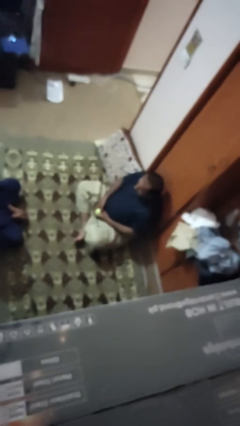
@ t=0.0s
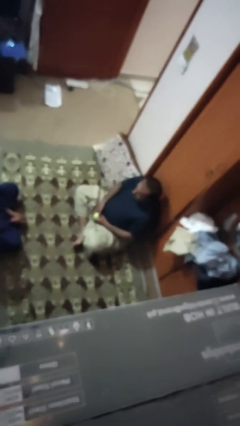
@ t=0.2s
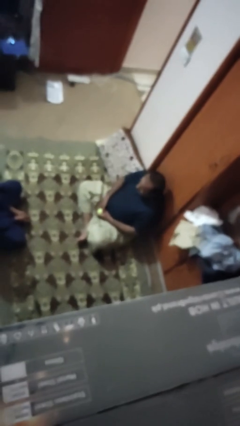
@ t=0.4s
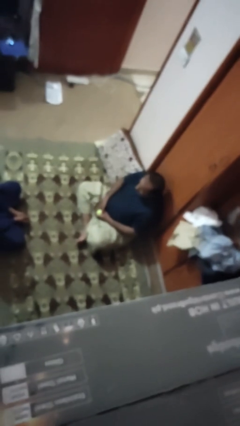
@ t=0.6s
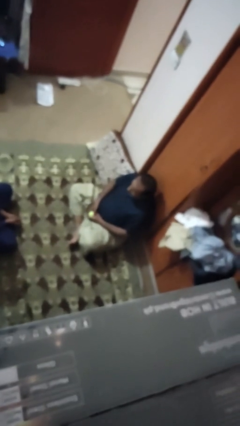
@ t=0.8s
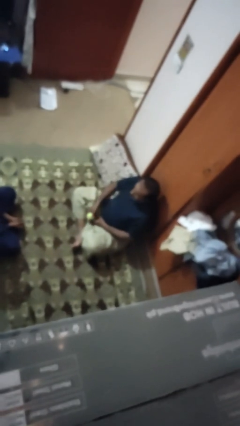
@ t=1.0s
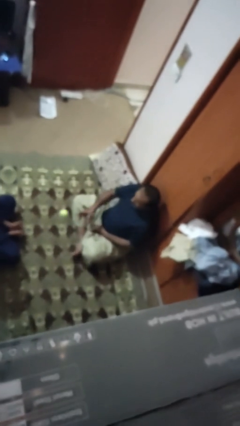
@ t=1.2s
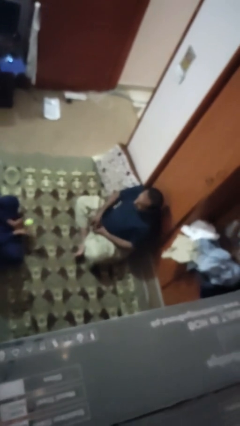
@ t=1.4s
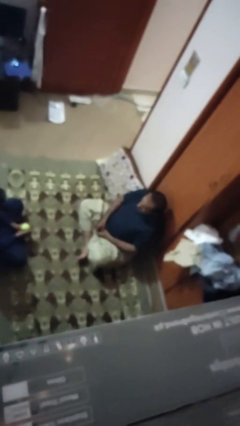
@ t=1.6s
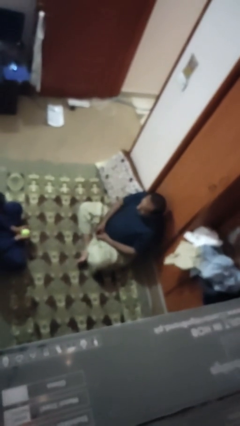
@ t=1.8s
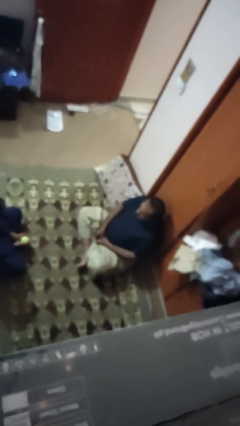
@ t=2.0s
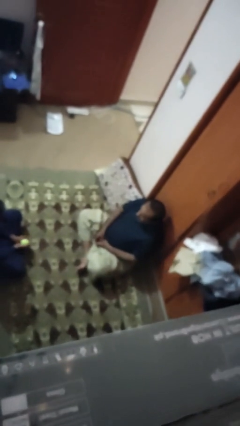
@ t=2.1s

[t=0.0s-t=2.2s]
person throws object to person

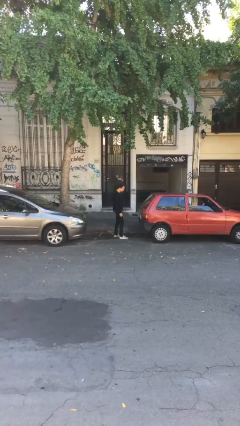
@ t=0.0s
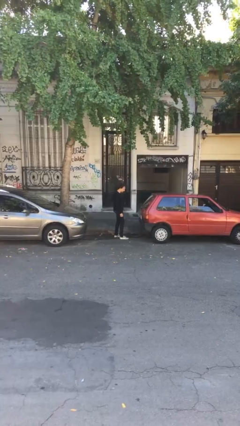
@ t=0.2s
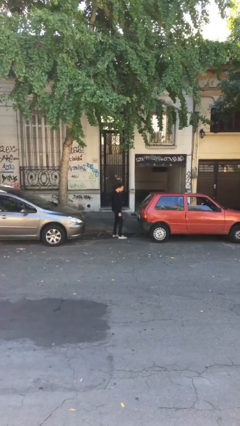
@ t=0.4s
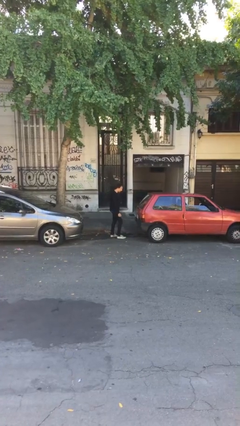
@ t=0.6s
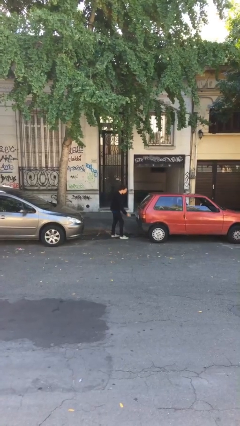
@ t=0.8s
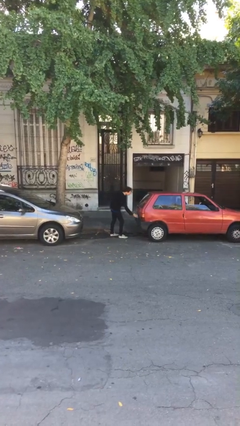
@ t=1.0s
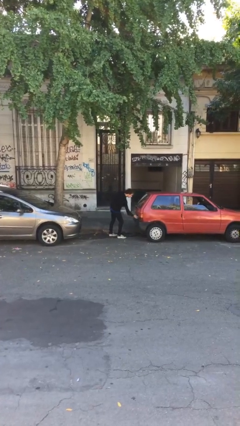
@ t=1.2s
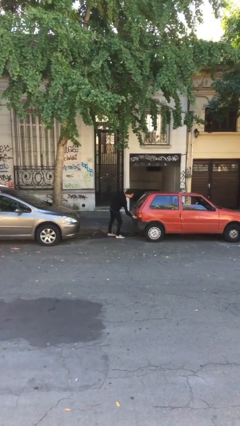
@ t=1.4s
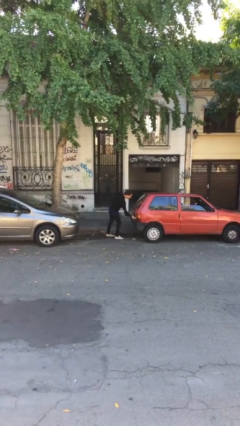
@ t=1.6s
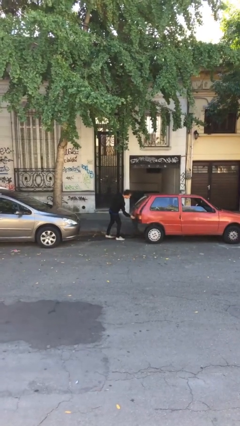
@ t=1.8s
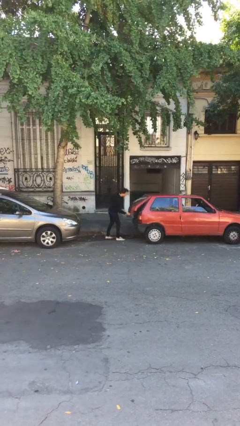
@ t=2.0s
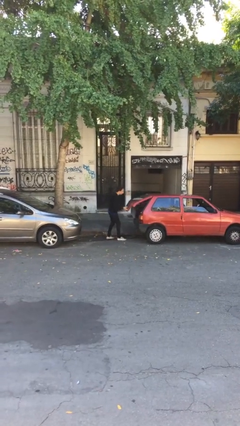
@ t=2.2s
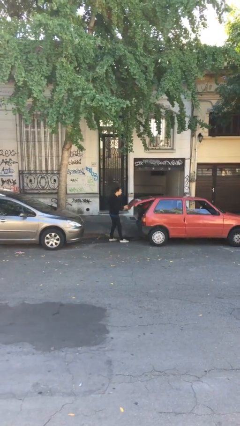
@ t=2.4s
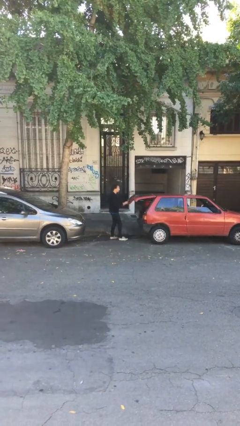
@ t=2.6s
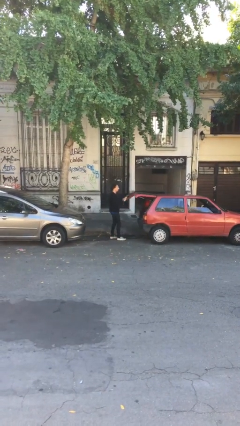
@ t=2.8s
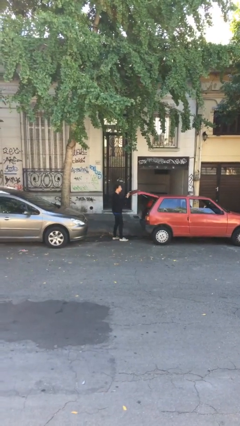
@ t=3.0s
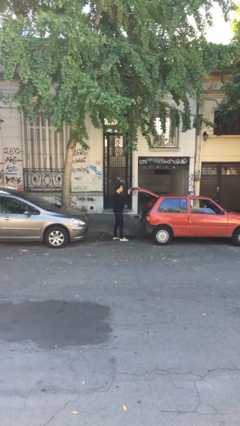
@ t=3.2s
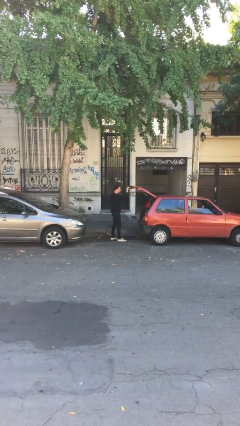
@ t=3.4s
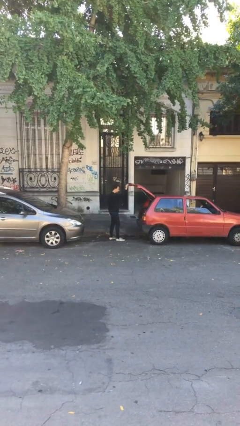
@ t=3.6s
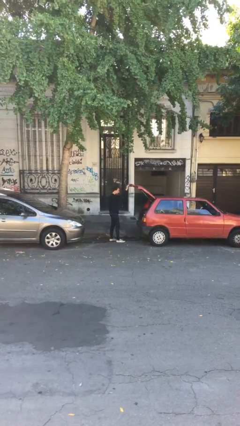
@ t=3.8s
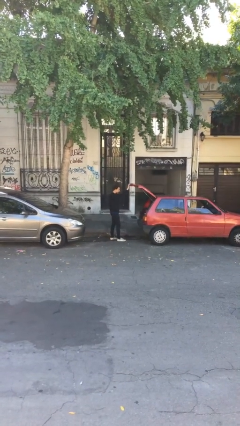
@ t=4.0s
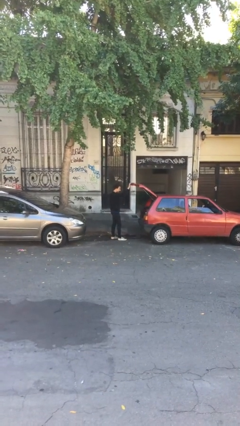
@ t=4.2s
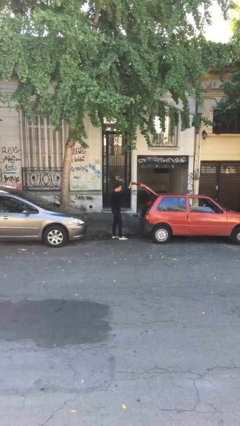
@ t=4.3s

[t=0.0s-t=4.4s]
person opens car trunk

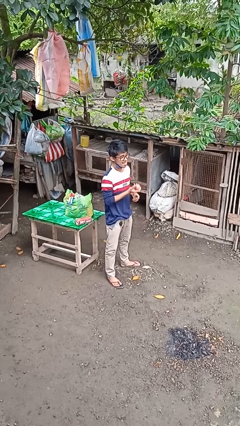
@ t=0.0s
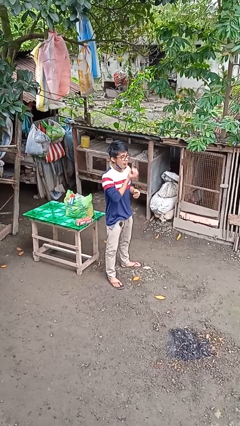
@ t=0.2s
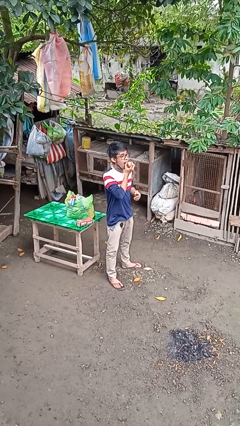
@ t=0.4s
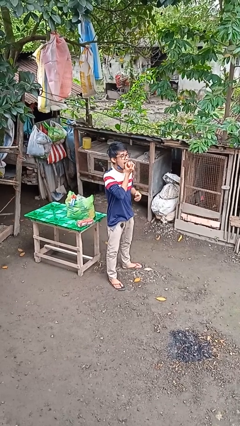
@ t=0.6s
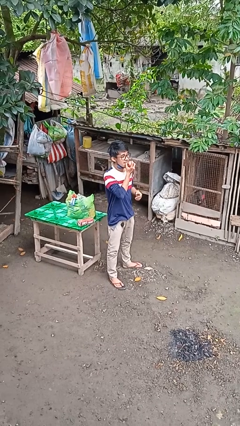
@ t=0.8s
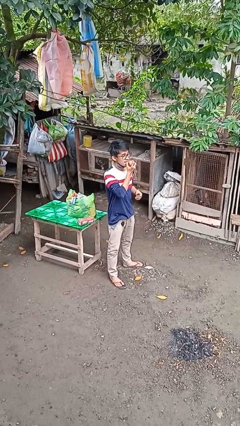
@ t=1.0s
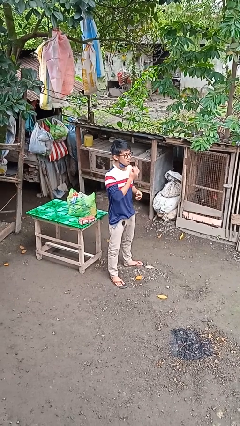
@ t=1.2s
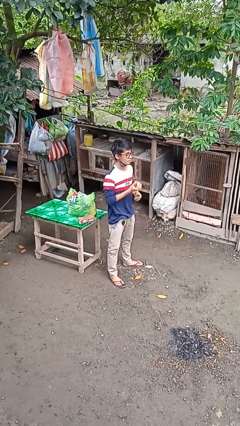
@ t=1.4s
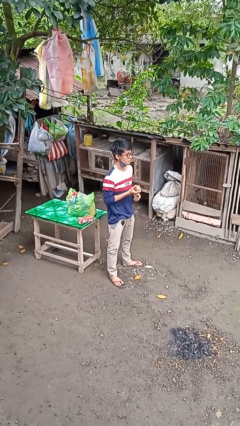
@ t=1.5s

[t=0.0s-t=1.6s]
person eats apple

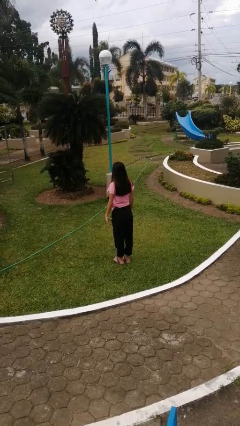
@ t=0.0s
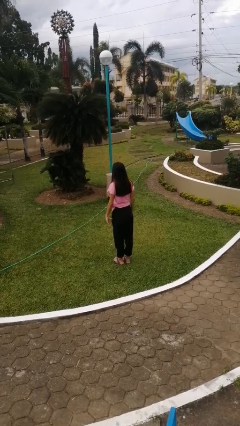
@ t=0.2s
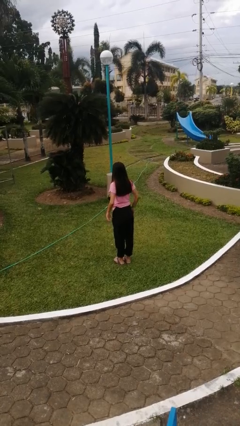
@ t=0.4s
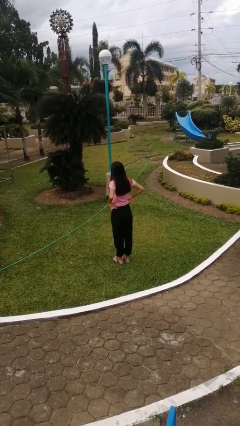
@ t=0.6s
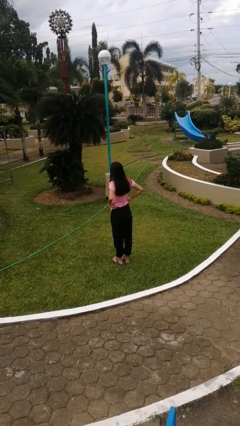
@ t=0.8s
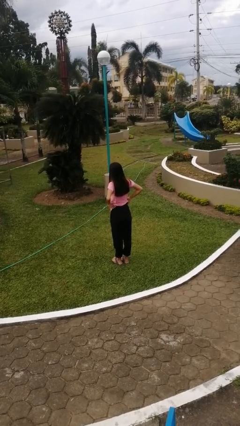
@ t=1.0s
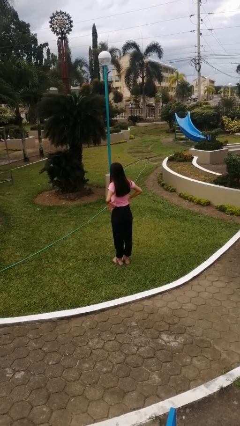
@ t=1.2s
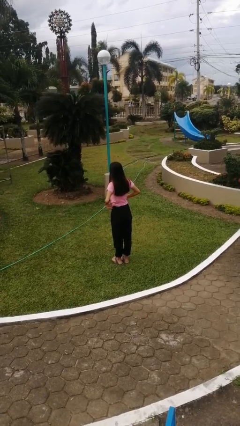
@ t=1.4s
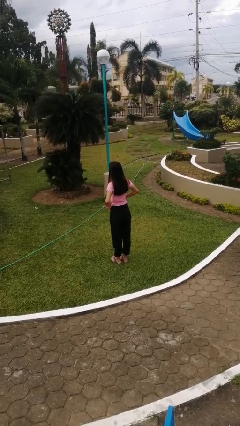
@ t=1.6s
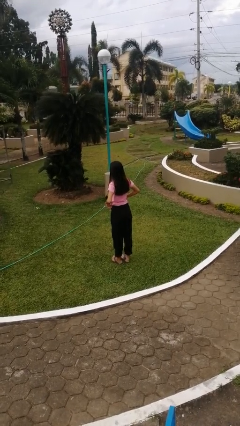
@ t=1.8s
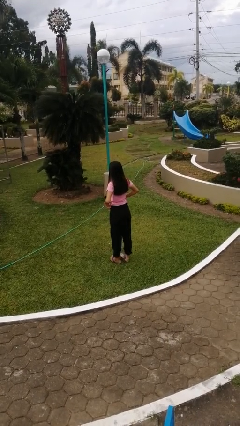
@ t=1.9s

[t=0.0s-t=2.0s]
person hikes up pants

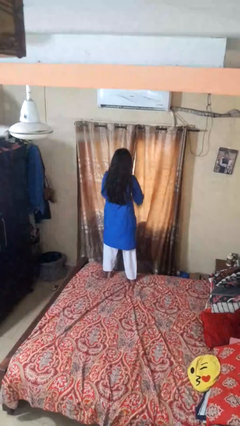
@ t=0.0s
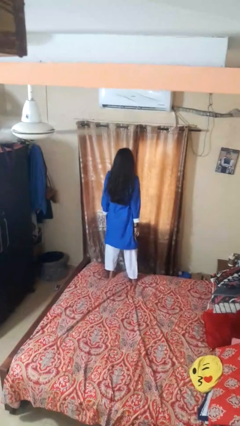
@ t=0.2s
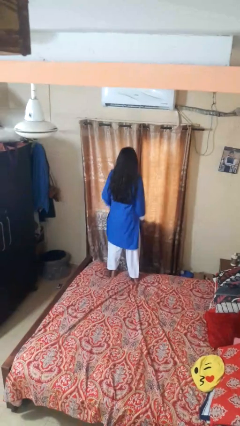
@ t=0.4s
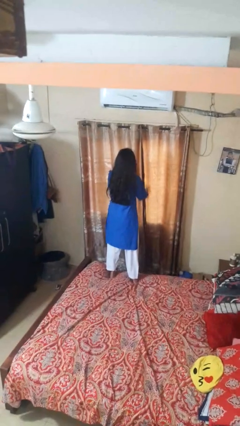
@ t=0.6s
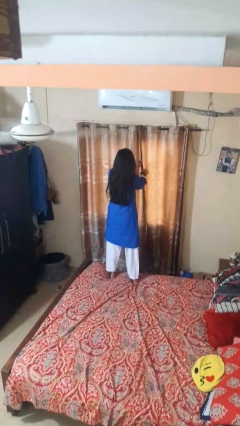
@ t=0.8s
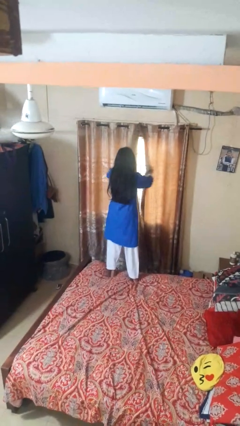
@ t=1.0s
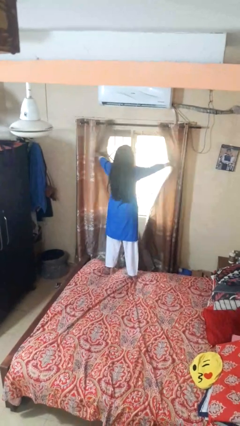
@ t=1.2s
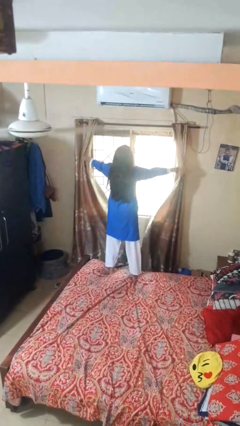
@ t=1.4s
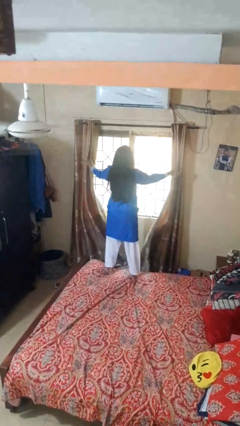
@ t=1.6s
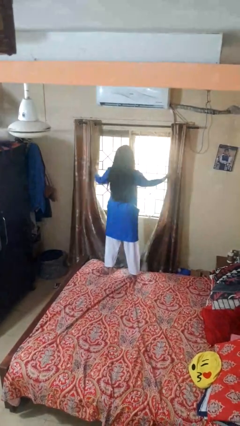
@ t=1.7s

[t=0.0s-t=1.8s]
person opens curtains

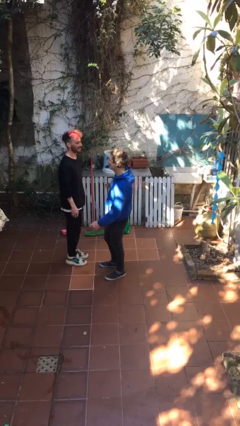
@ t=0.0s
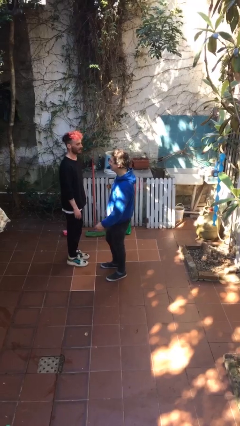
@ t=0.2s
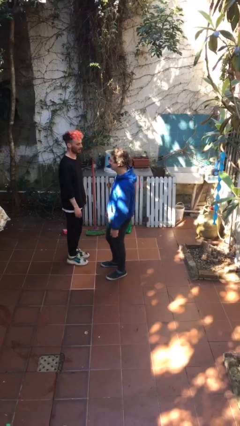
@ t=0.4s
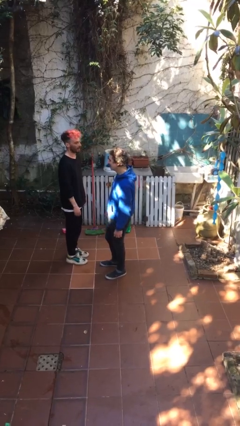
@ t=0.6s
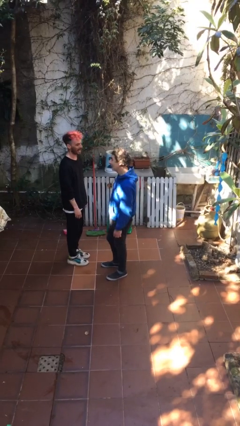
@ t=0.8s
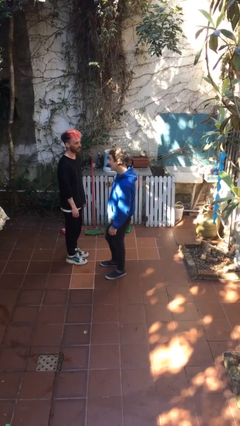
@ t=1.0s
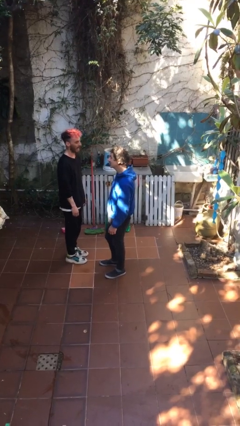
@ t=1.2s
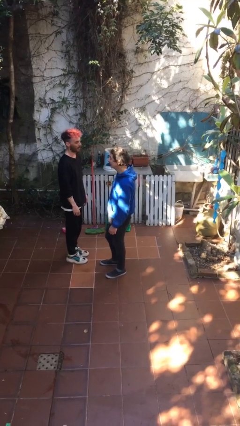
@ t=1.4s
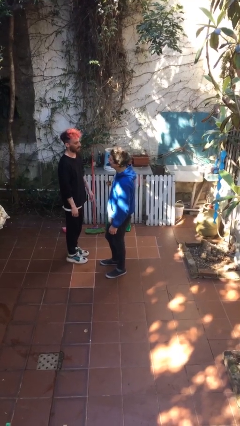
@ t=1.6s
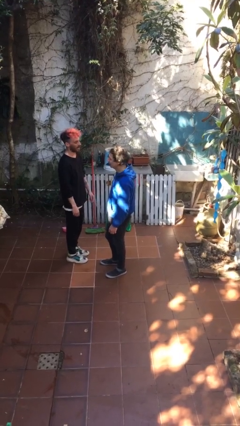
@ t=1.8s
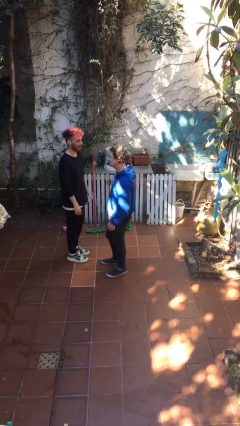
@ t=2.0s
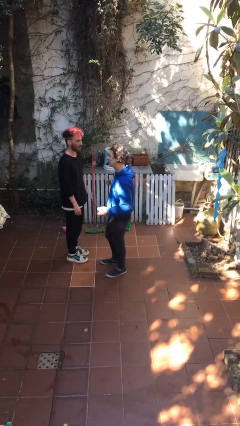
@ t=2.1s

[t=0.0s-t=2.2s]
person talks to person

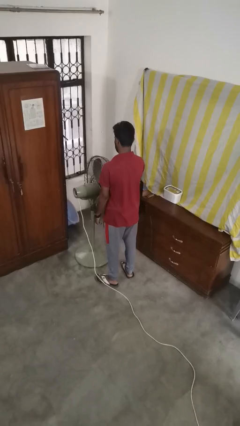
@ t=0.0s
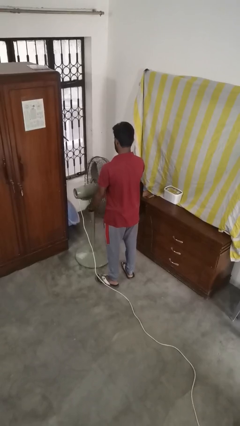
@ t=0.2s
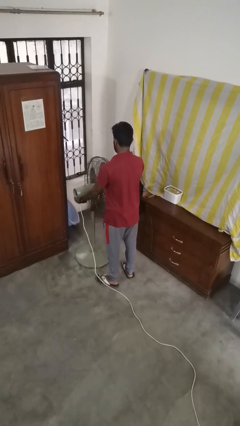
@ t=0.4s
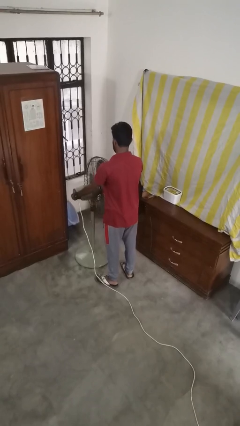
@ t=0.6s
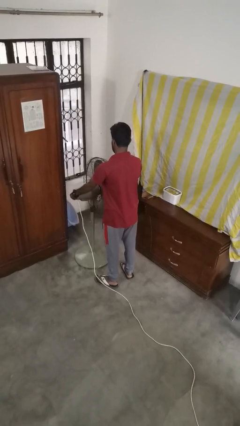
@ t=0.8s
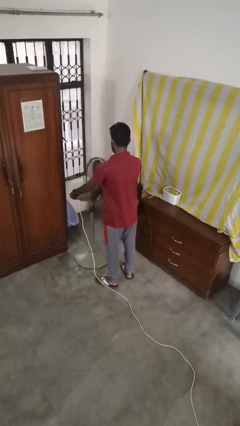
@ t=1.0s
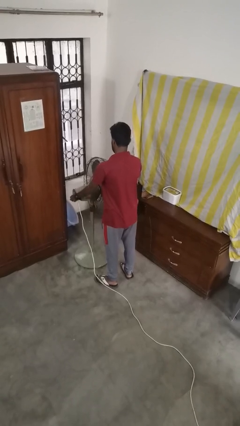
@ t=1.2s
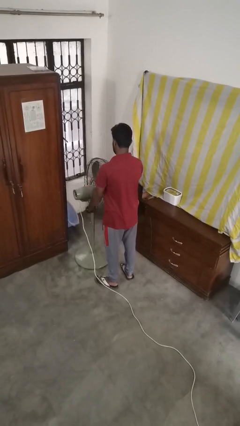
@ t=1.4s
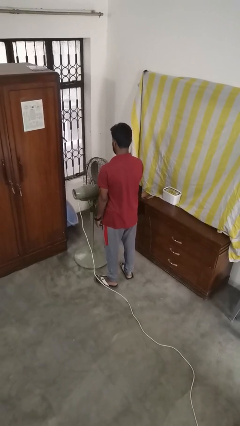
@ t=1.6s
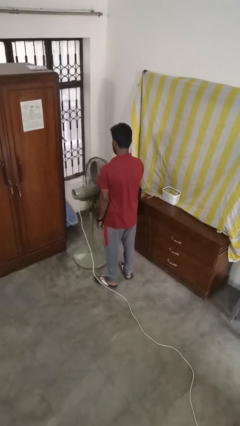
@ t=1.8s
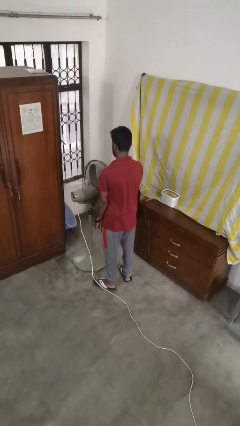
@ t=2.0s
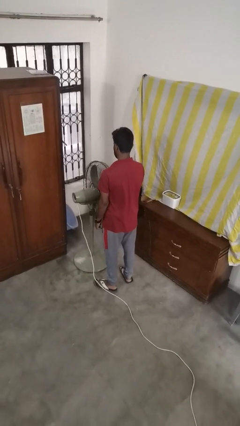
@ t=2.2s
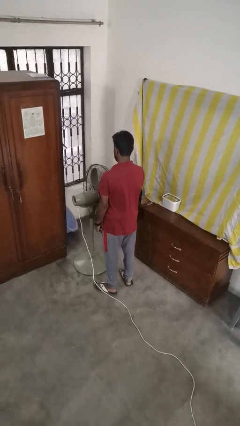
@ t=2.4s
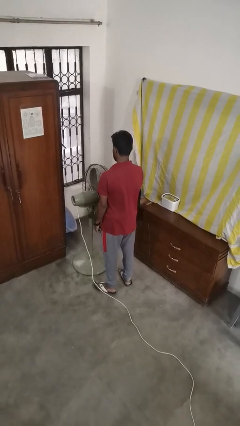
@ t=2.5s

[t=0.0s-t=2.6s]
person turns off fan

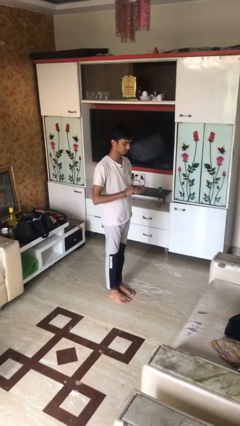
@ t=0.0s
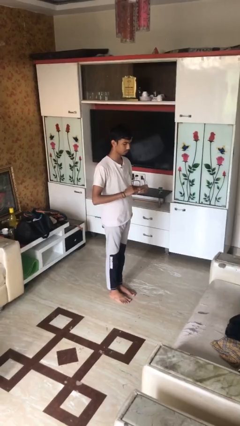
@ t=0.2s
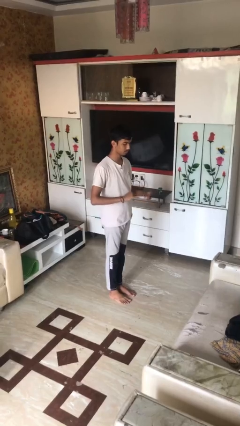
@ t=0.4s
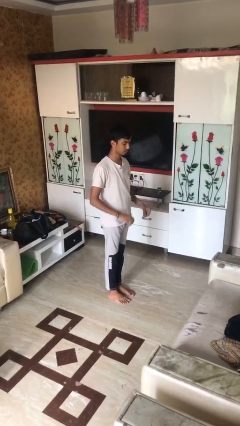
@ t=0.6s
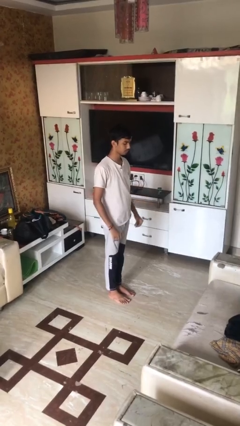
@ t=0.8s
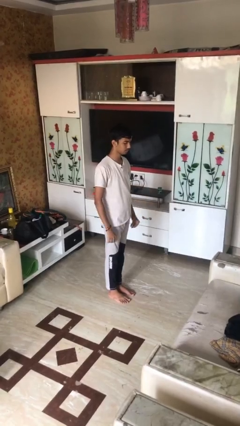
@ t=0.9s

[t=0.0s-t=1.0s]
person takes off ring
